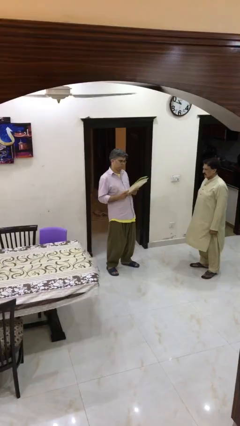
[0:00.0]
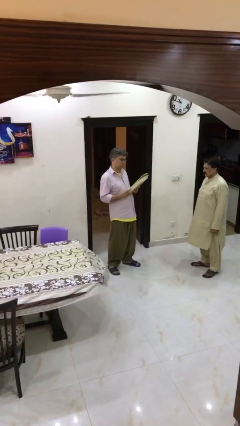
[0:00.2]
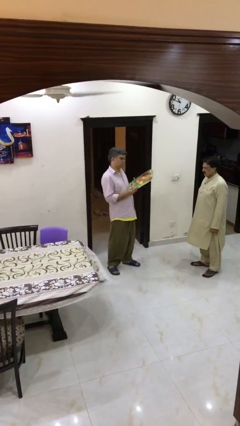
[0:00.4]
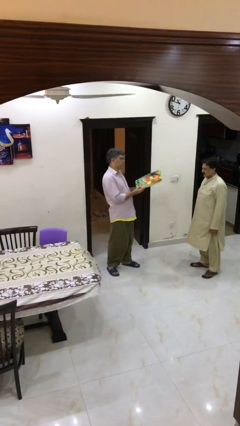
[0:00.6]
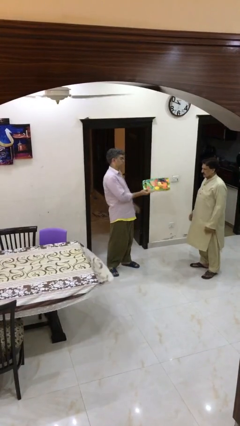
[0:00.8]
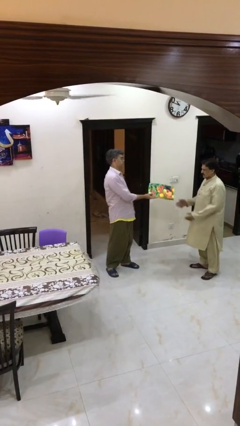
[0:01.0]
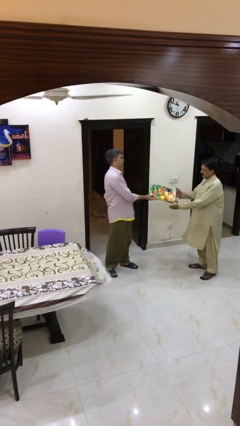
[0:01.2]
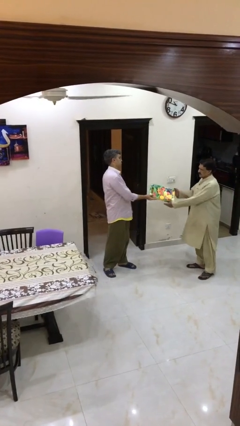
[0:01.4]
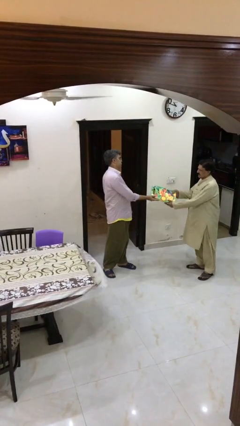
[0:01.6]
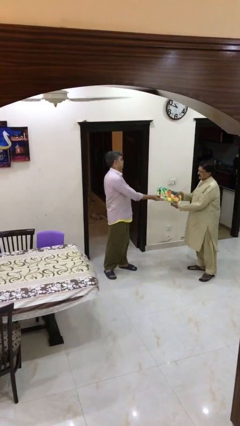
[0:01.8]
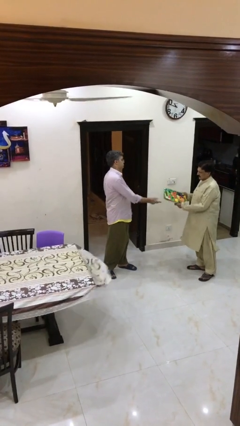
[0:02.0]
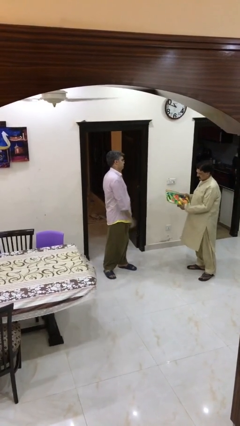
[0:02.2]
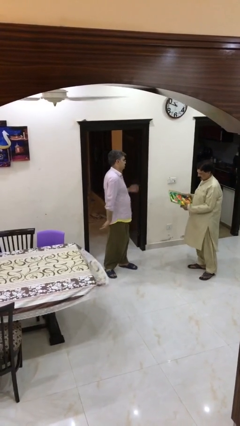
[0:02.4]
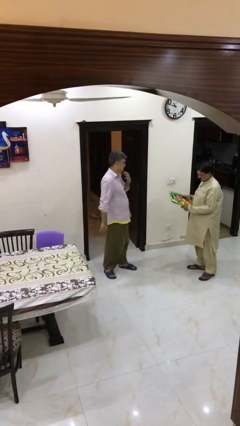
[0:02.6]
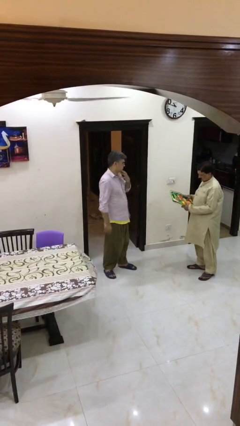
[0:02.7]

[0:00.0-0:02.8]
person transfers object to person

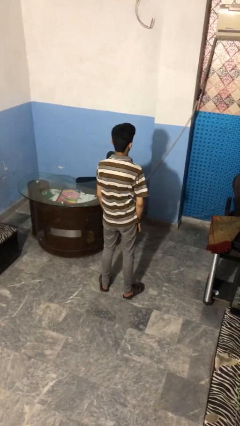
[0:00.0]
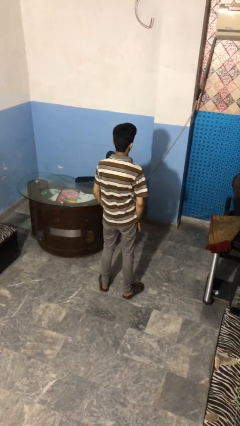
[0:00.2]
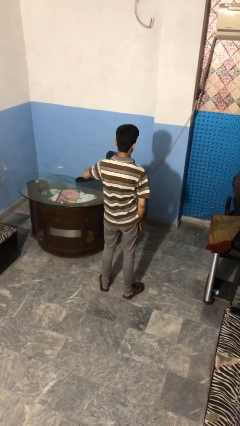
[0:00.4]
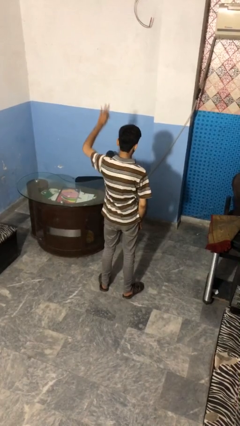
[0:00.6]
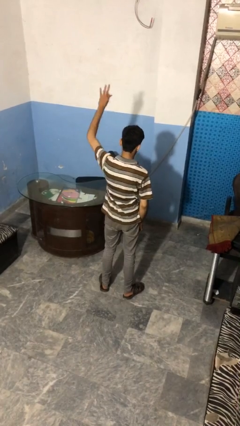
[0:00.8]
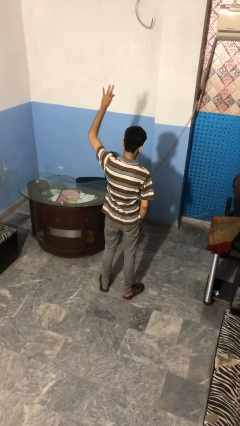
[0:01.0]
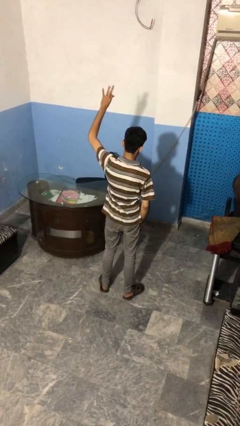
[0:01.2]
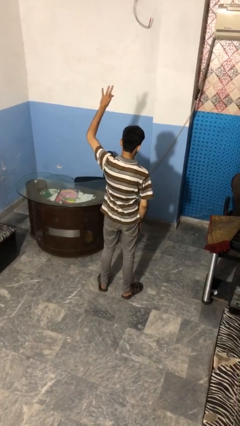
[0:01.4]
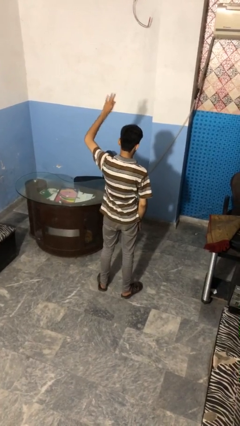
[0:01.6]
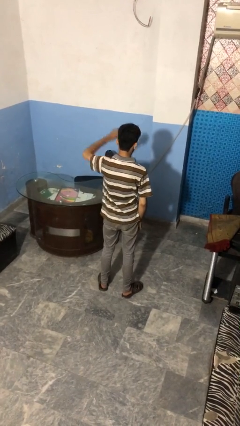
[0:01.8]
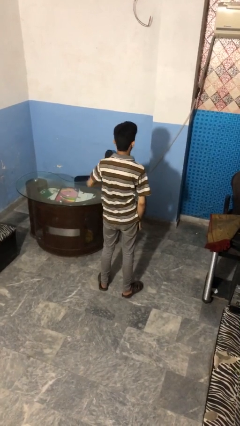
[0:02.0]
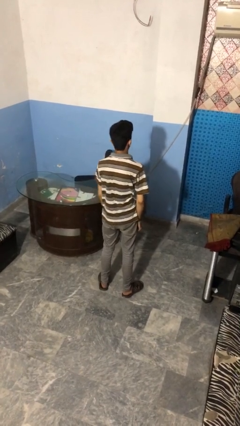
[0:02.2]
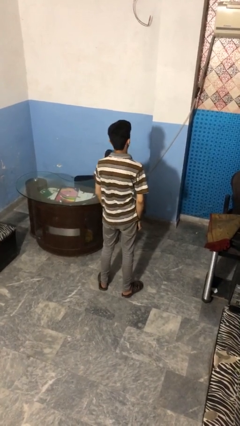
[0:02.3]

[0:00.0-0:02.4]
person gestures number three

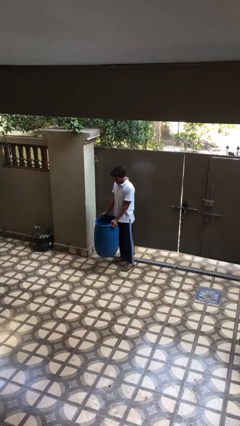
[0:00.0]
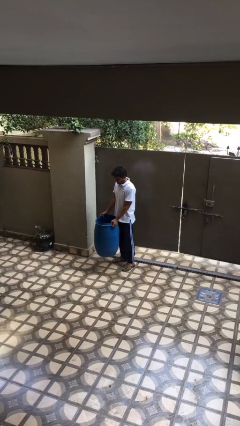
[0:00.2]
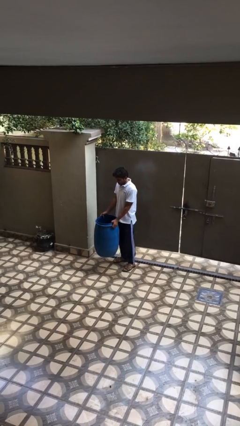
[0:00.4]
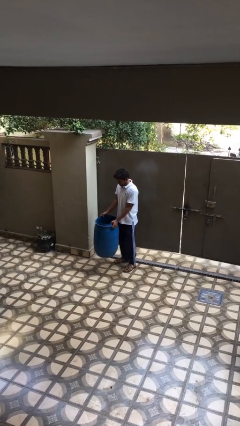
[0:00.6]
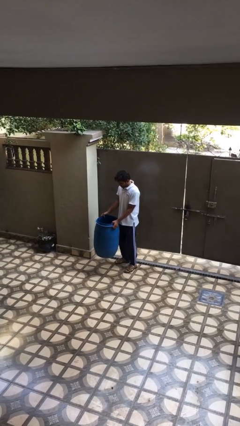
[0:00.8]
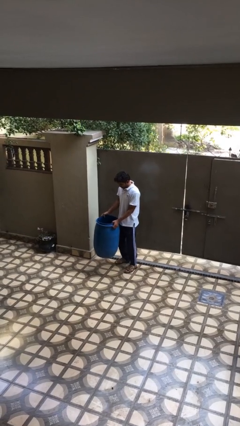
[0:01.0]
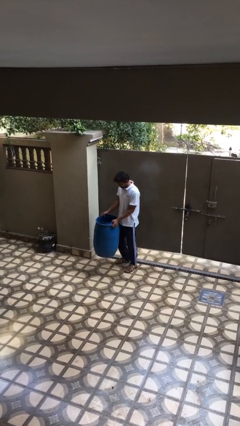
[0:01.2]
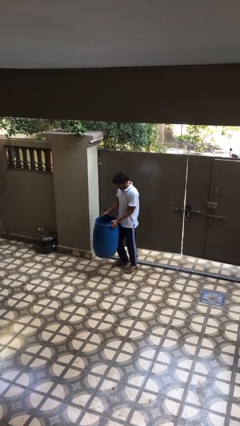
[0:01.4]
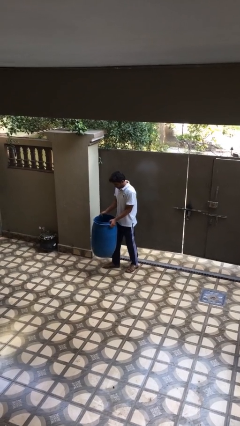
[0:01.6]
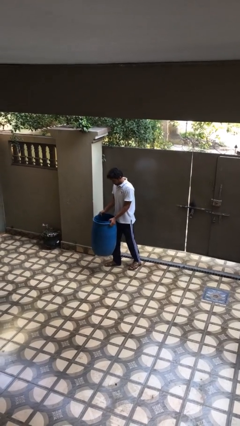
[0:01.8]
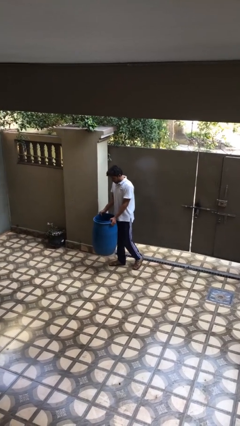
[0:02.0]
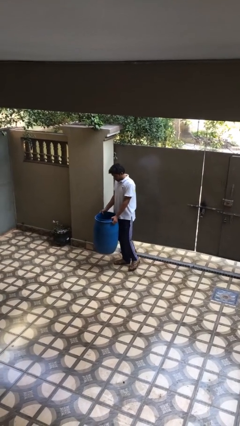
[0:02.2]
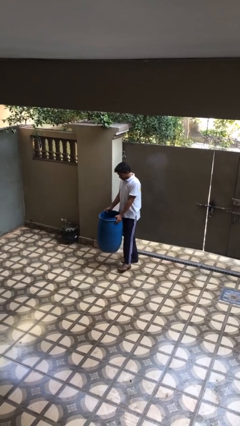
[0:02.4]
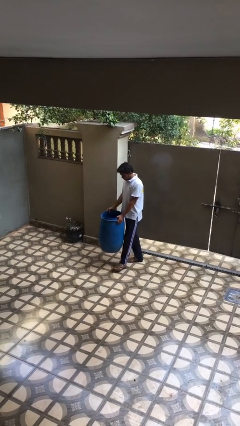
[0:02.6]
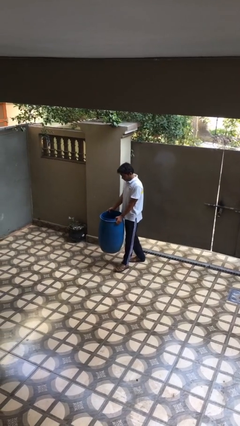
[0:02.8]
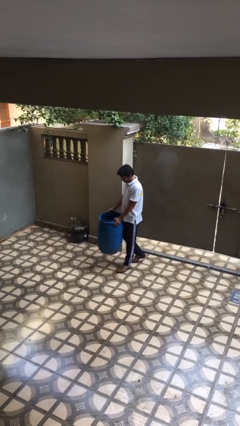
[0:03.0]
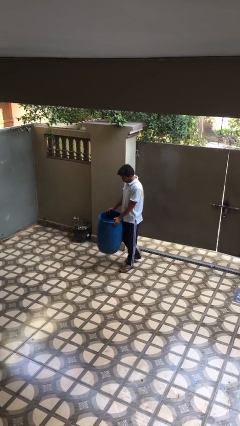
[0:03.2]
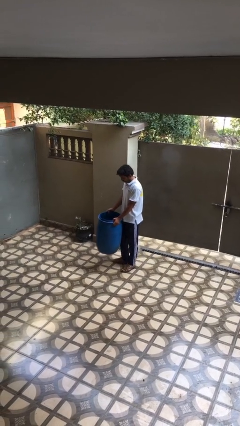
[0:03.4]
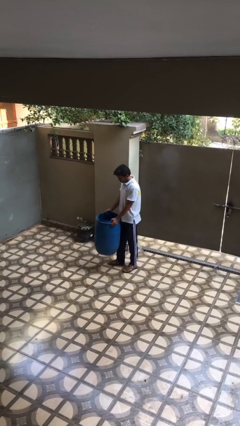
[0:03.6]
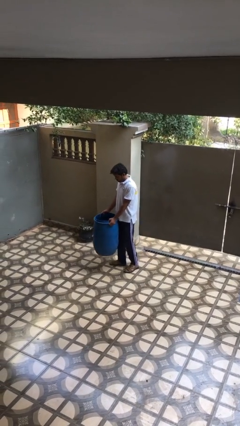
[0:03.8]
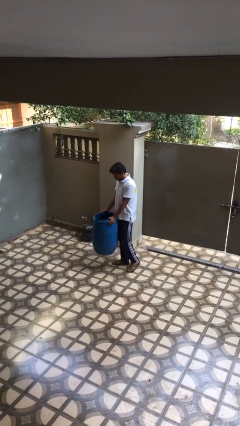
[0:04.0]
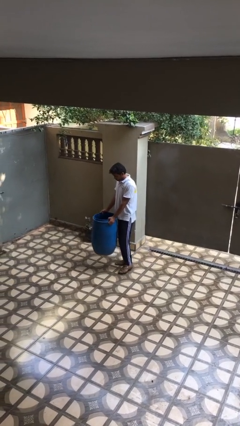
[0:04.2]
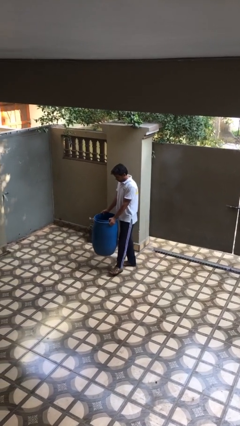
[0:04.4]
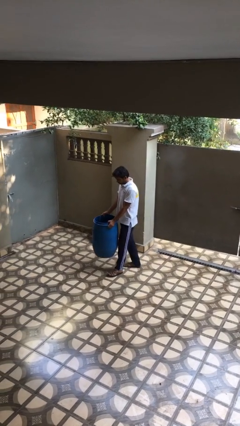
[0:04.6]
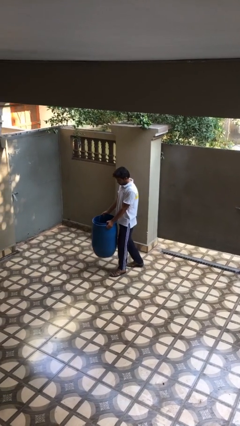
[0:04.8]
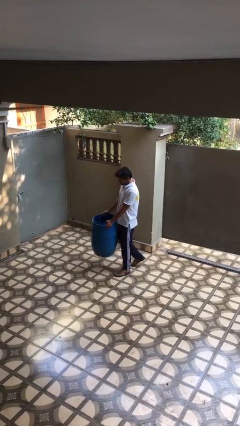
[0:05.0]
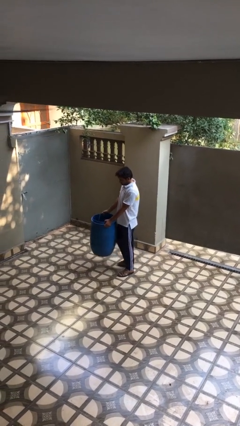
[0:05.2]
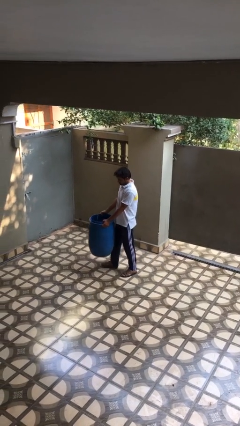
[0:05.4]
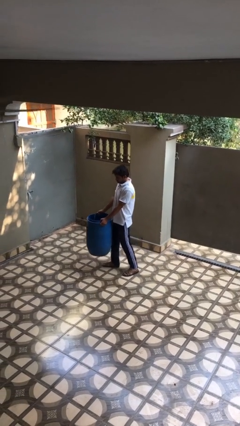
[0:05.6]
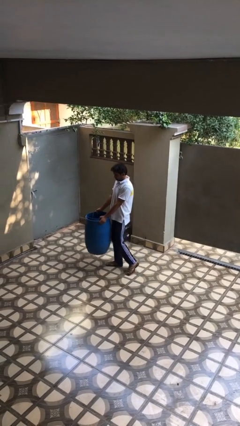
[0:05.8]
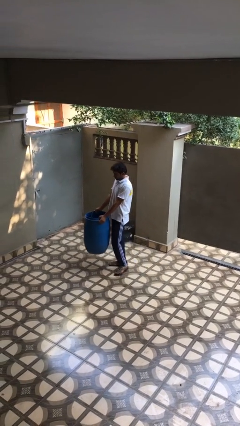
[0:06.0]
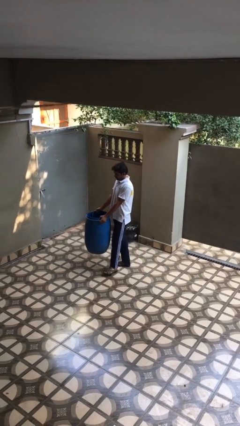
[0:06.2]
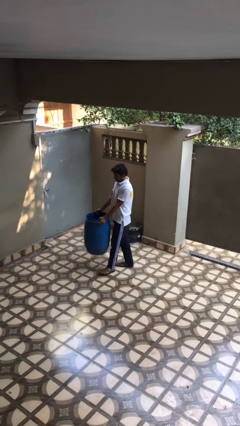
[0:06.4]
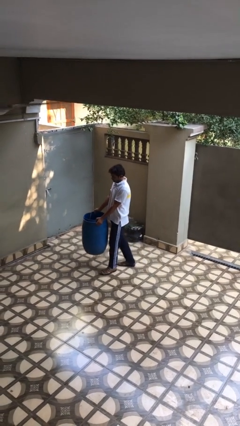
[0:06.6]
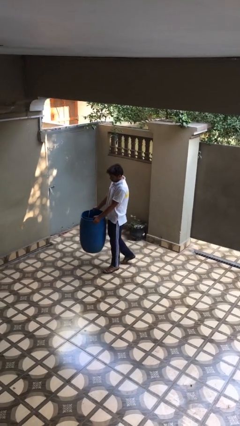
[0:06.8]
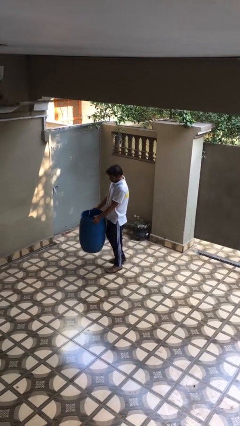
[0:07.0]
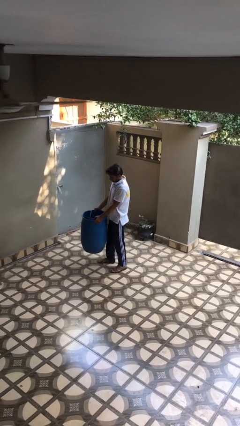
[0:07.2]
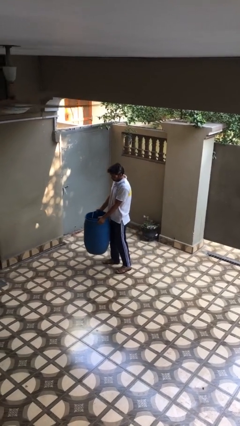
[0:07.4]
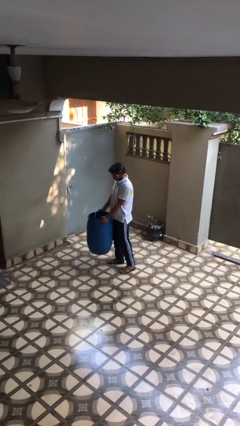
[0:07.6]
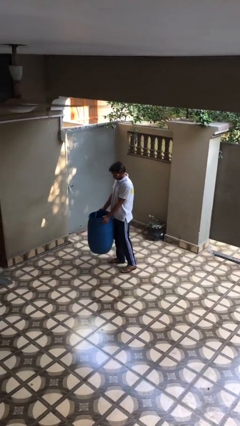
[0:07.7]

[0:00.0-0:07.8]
person carries heavy object

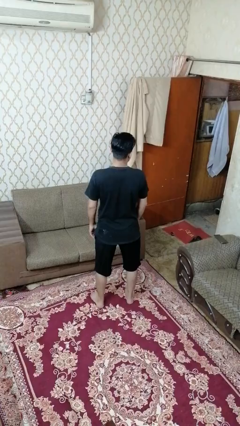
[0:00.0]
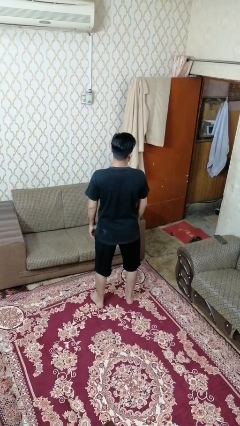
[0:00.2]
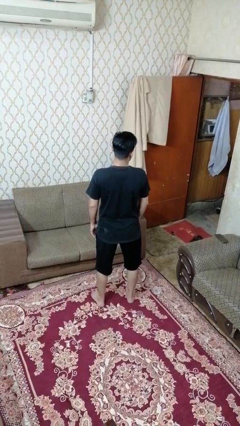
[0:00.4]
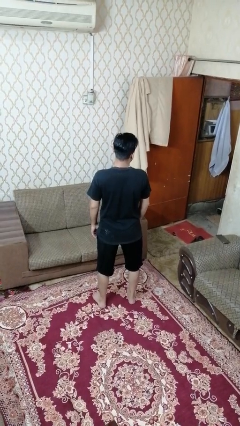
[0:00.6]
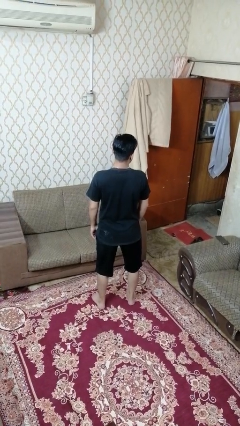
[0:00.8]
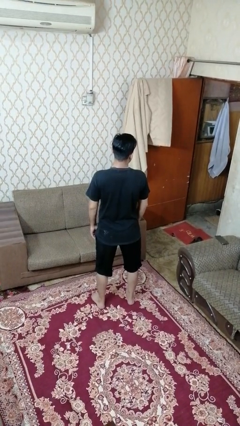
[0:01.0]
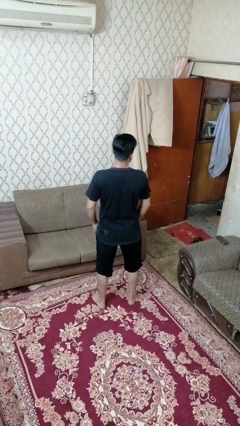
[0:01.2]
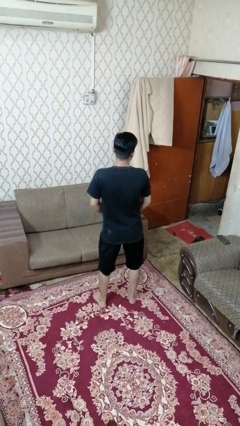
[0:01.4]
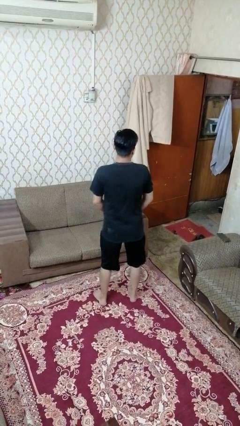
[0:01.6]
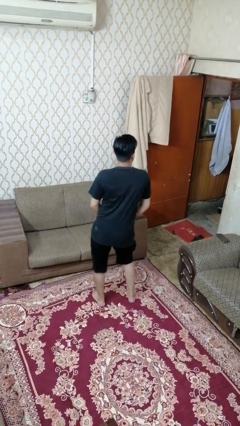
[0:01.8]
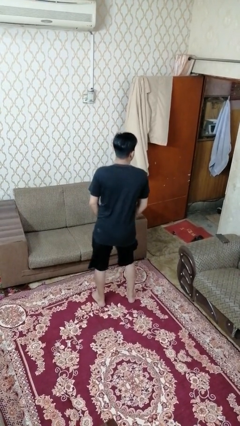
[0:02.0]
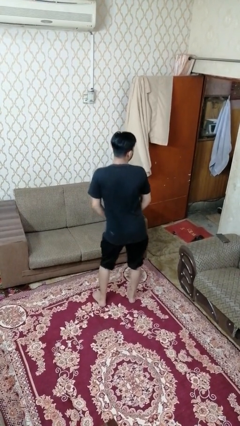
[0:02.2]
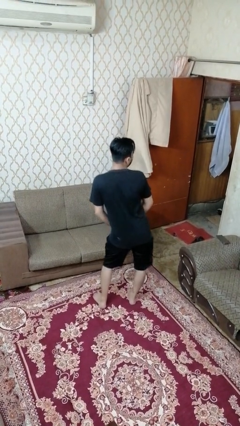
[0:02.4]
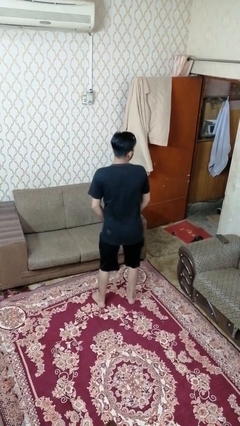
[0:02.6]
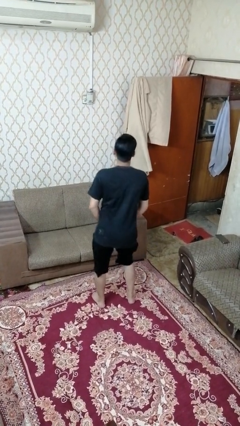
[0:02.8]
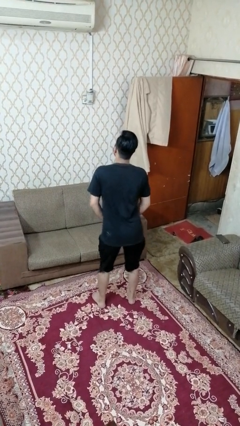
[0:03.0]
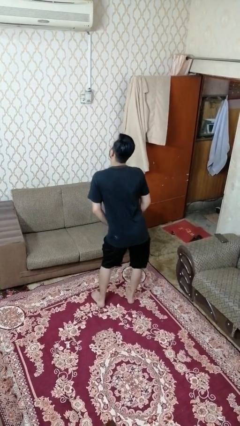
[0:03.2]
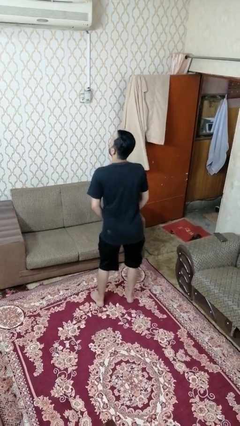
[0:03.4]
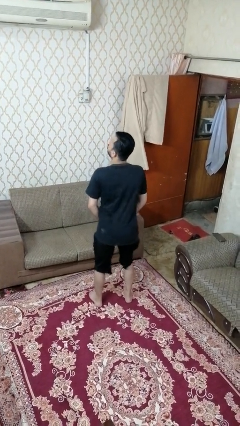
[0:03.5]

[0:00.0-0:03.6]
person wiggles hips

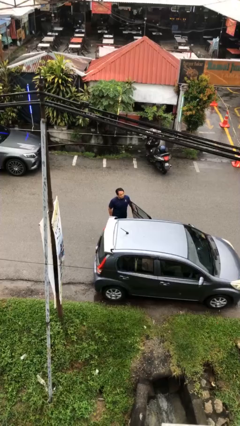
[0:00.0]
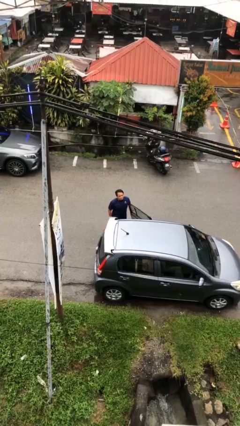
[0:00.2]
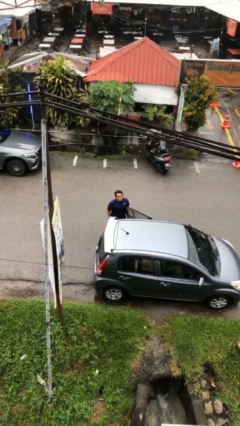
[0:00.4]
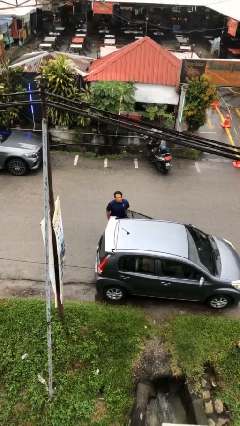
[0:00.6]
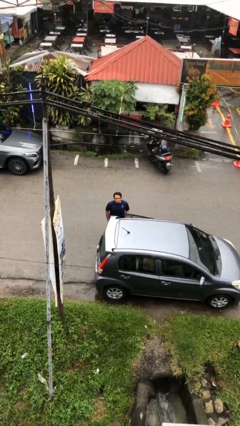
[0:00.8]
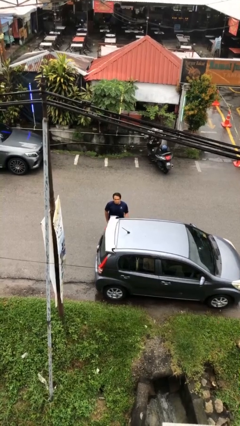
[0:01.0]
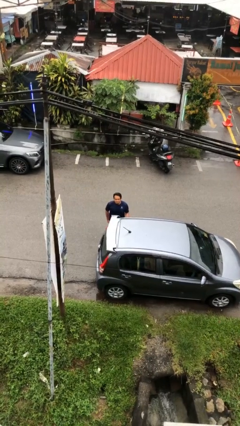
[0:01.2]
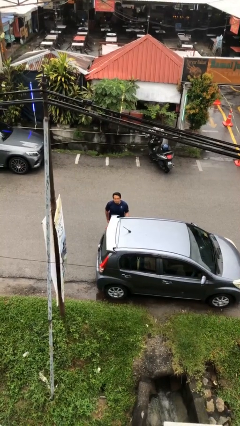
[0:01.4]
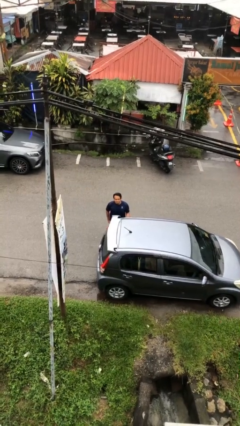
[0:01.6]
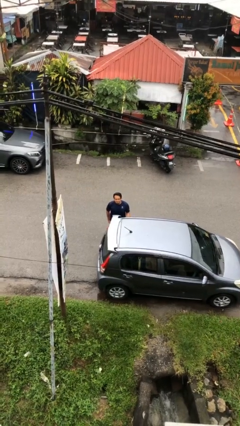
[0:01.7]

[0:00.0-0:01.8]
person closes car door
